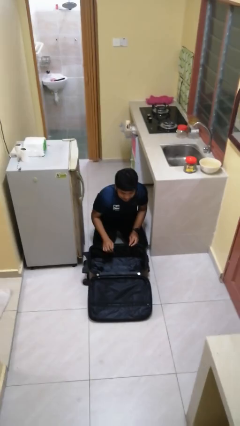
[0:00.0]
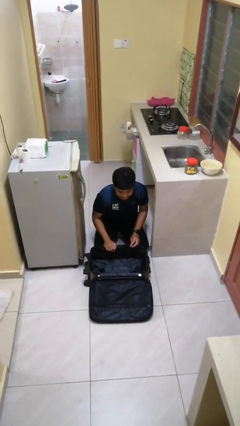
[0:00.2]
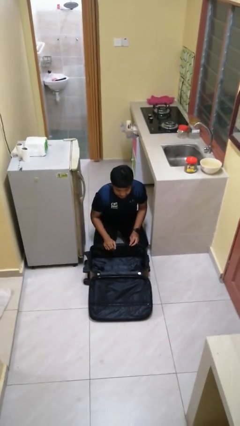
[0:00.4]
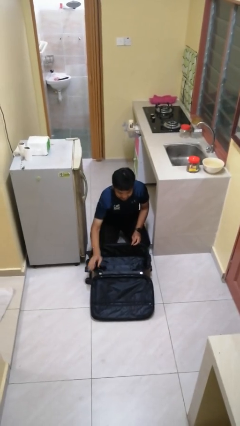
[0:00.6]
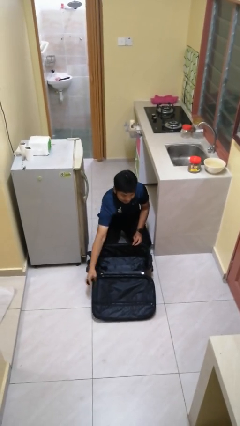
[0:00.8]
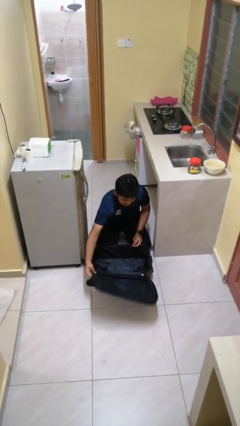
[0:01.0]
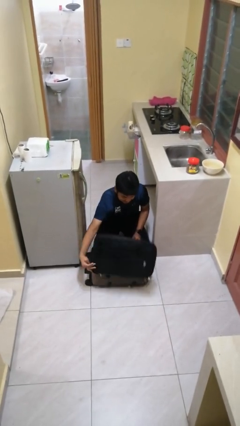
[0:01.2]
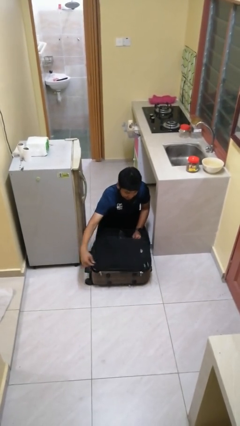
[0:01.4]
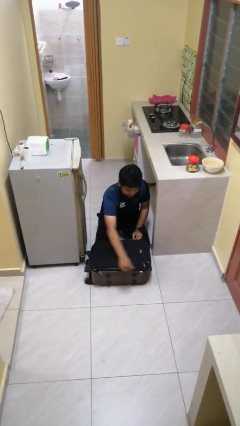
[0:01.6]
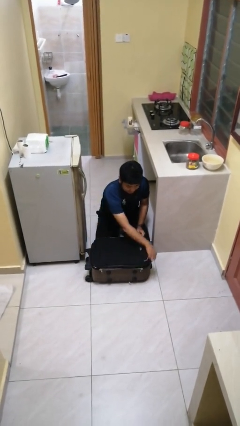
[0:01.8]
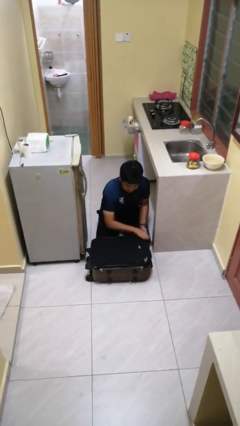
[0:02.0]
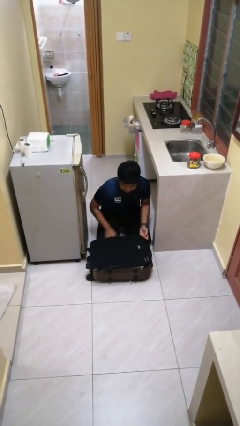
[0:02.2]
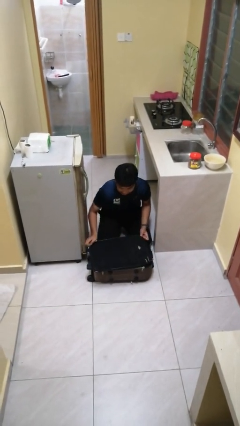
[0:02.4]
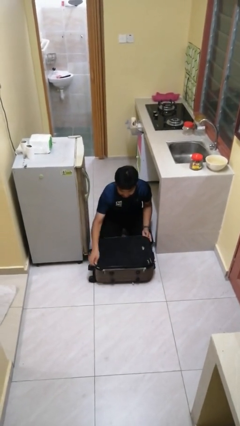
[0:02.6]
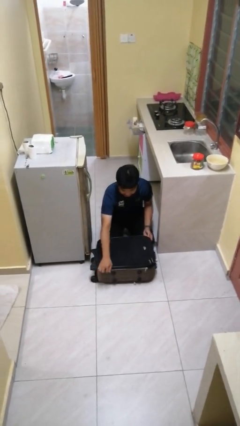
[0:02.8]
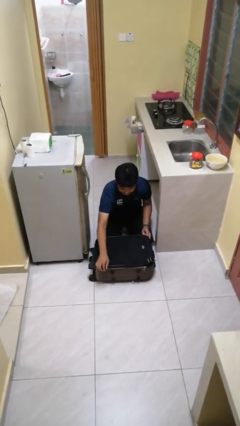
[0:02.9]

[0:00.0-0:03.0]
person closes suitcase

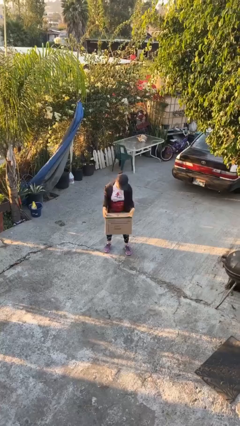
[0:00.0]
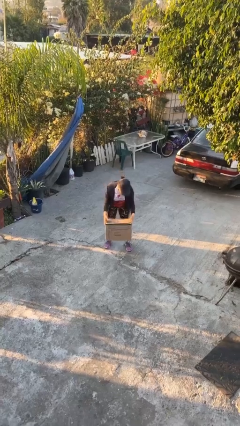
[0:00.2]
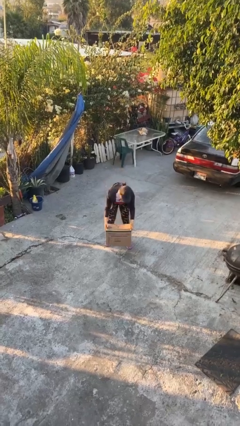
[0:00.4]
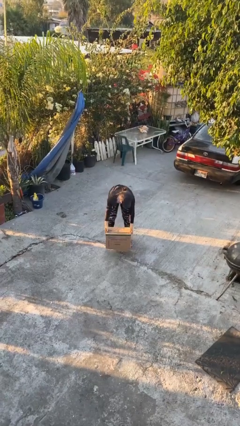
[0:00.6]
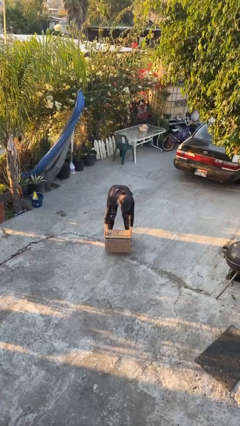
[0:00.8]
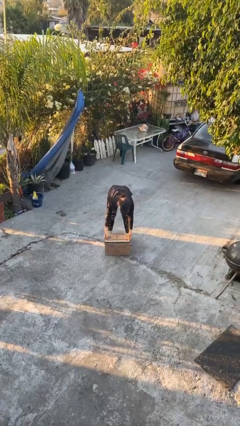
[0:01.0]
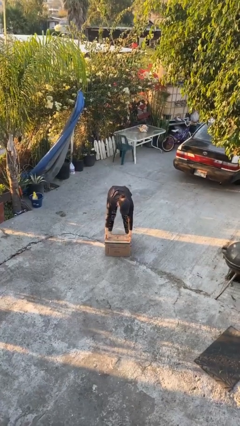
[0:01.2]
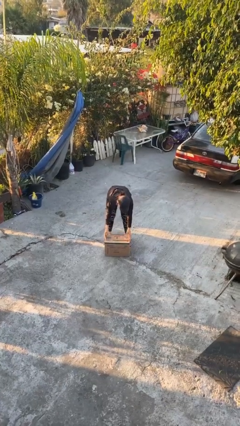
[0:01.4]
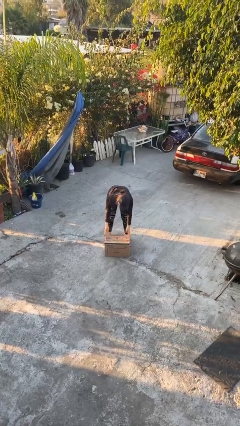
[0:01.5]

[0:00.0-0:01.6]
person puts down object on floor

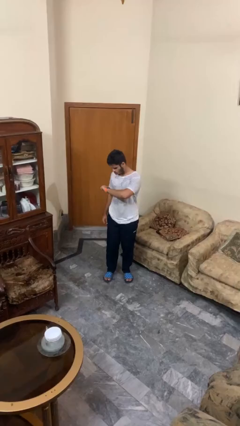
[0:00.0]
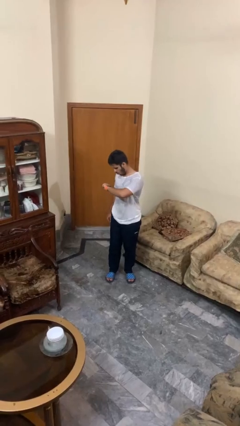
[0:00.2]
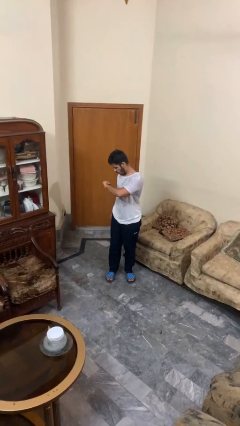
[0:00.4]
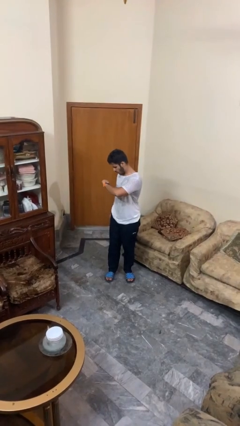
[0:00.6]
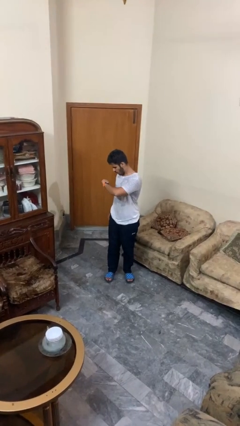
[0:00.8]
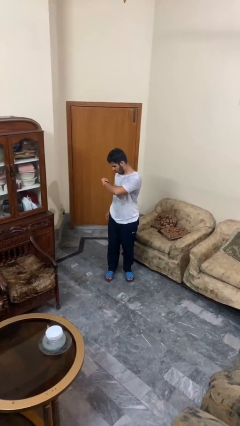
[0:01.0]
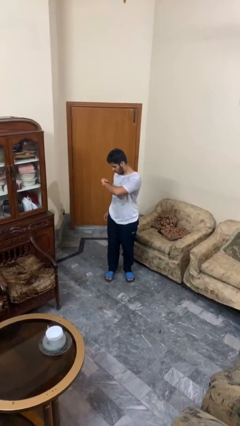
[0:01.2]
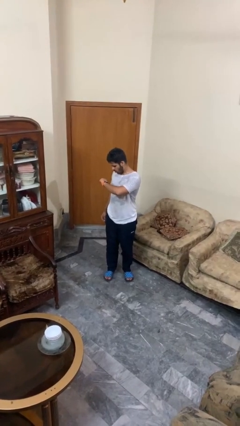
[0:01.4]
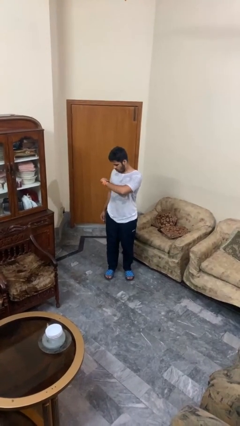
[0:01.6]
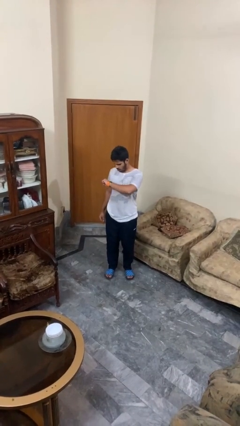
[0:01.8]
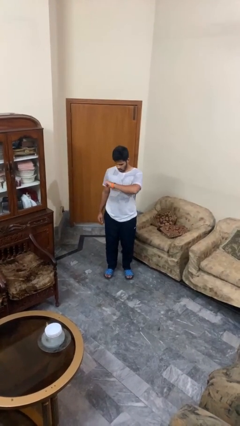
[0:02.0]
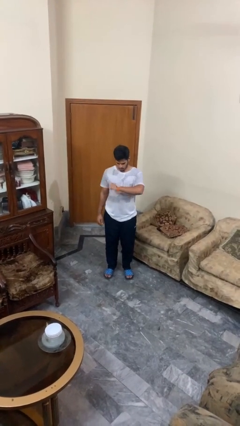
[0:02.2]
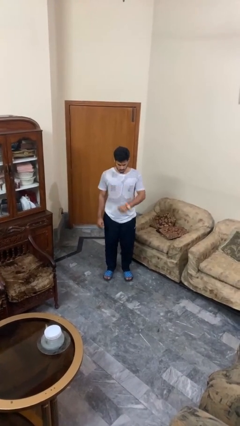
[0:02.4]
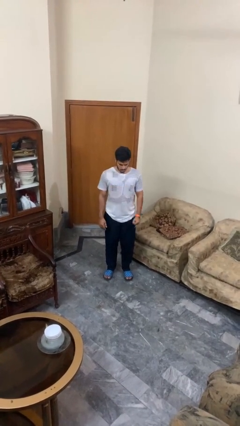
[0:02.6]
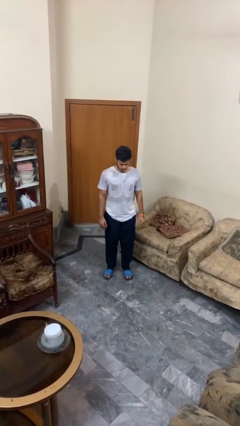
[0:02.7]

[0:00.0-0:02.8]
person looks at wristwatch

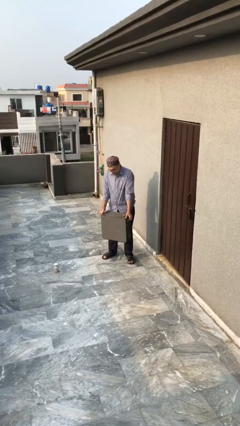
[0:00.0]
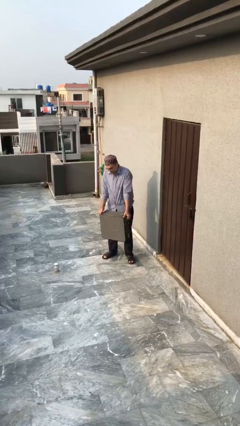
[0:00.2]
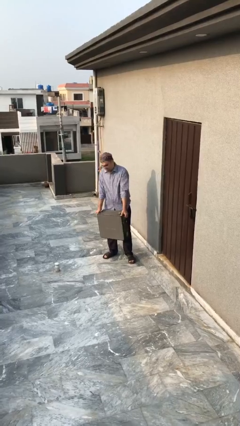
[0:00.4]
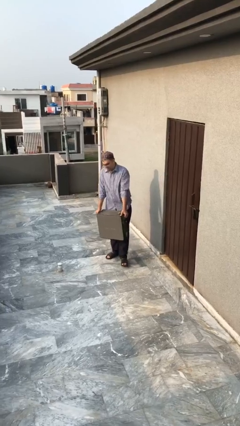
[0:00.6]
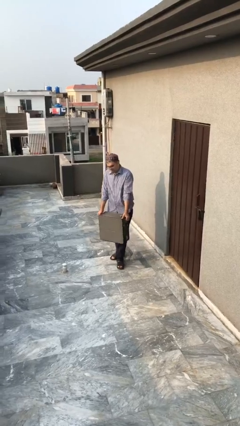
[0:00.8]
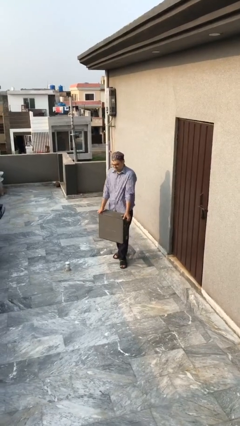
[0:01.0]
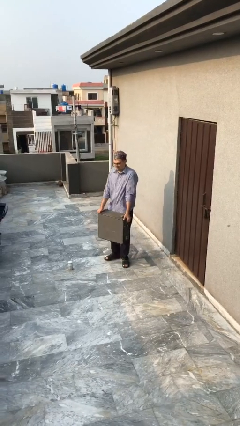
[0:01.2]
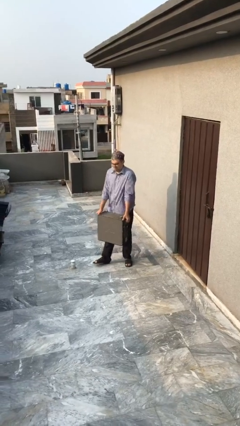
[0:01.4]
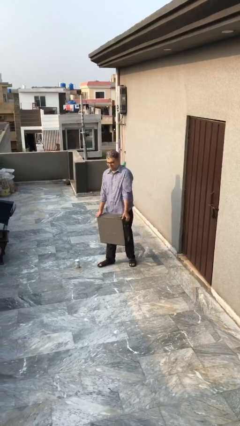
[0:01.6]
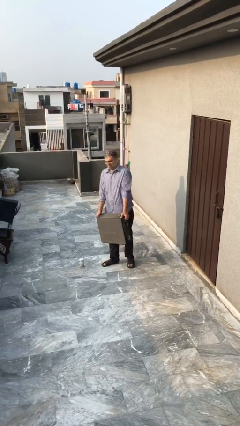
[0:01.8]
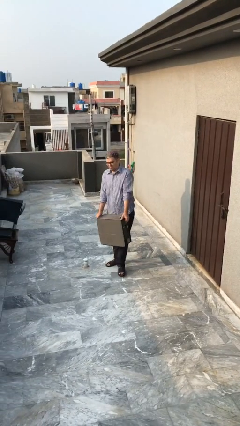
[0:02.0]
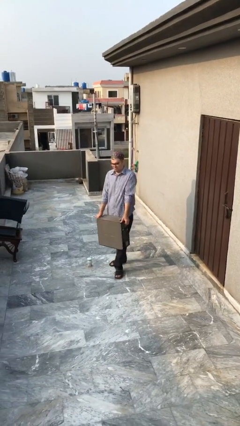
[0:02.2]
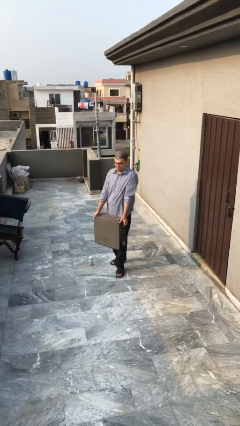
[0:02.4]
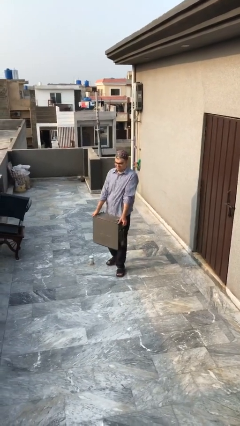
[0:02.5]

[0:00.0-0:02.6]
person carries heavy object

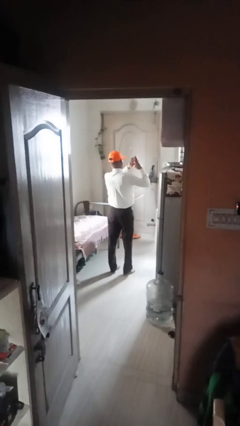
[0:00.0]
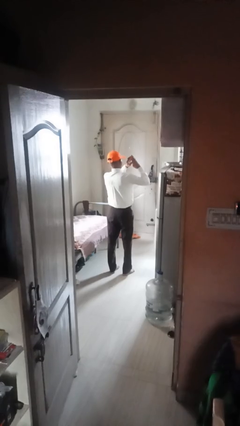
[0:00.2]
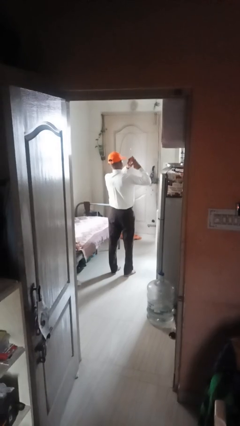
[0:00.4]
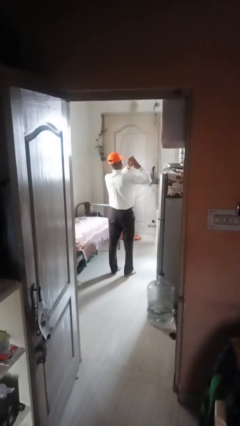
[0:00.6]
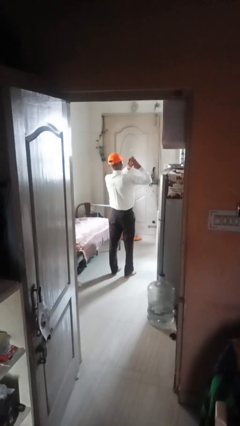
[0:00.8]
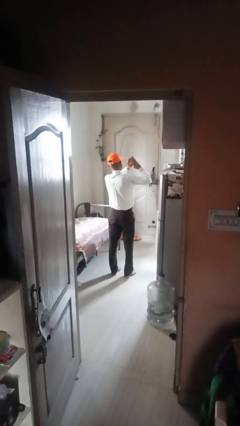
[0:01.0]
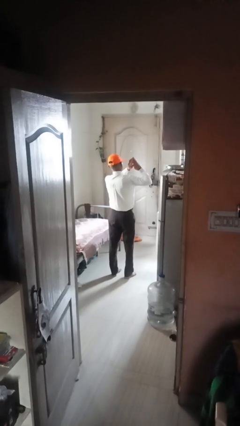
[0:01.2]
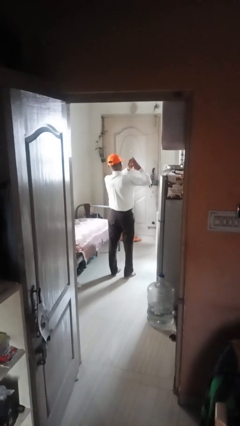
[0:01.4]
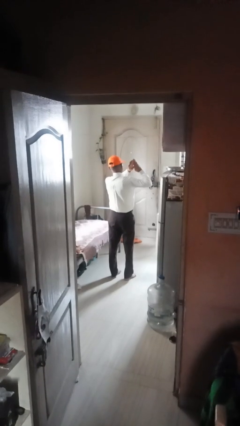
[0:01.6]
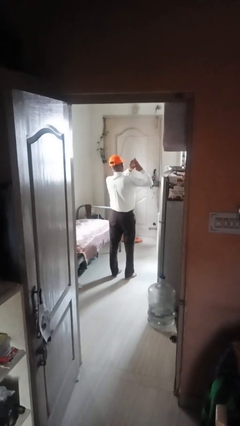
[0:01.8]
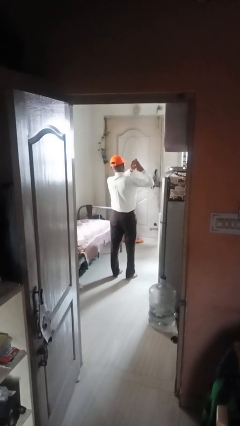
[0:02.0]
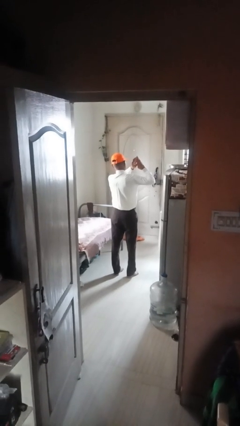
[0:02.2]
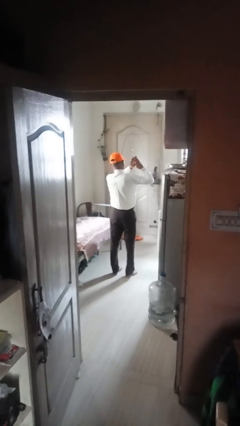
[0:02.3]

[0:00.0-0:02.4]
person gestures heart

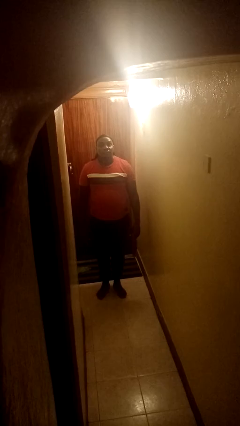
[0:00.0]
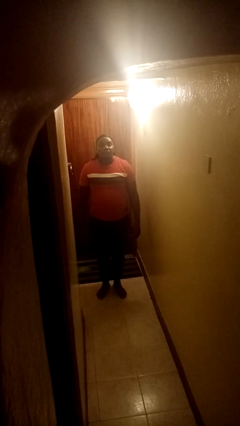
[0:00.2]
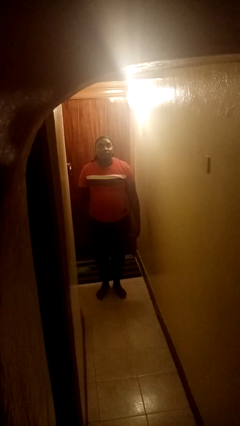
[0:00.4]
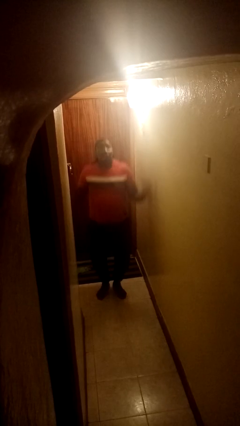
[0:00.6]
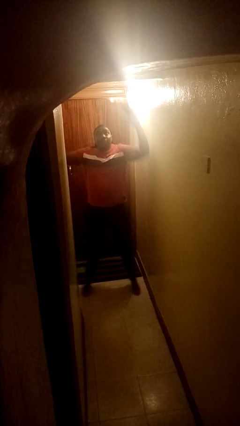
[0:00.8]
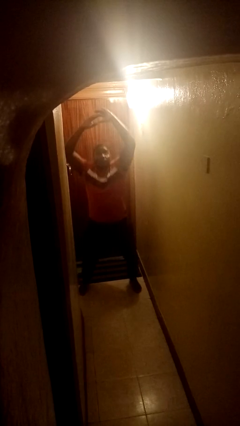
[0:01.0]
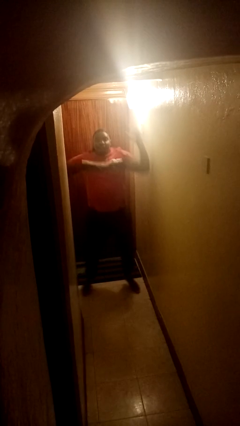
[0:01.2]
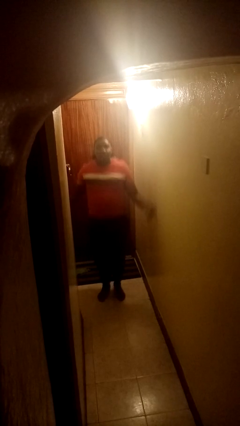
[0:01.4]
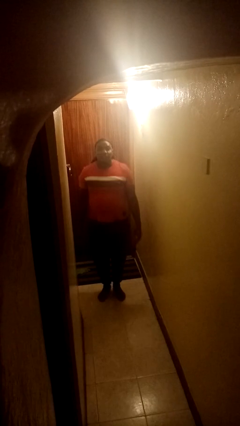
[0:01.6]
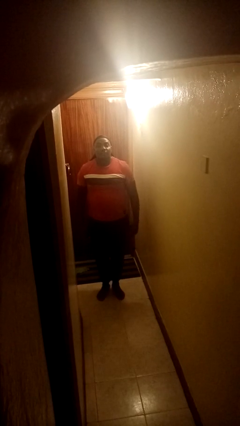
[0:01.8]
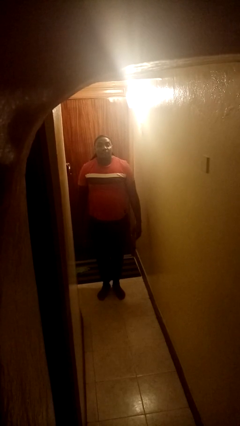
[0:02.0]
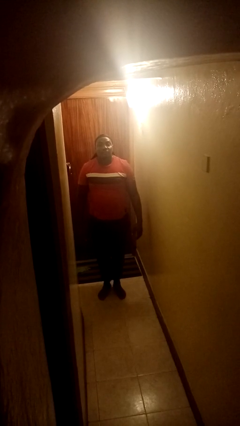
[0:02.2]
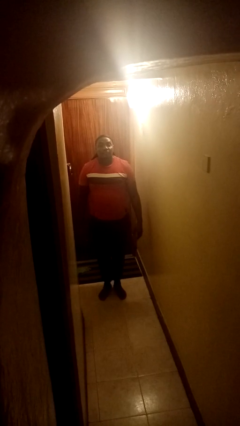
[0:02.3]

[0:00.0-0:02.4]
person exercises with jumping jacks

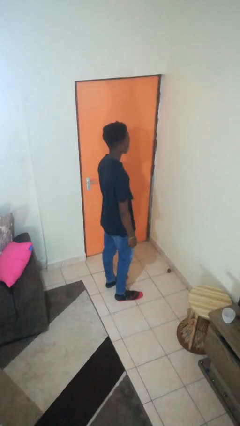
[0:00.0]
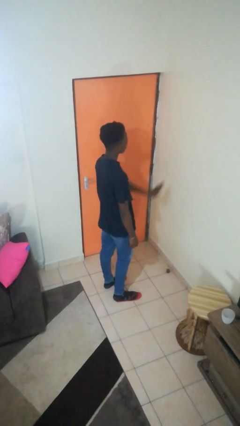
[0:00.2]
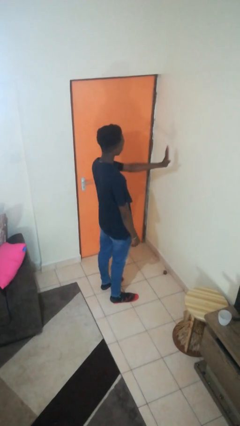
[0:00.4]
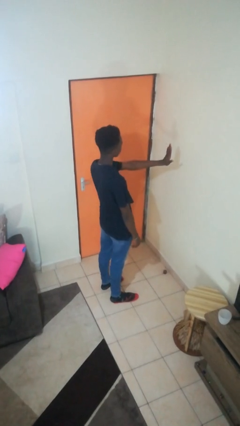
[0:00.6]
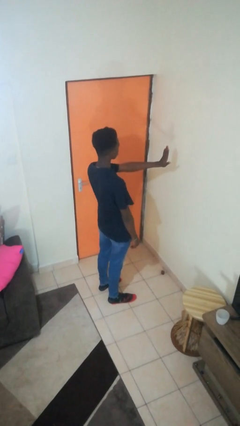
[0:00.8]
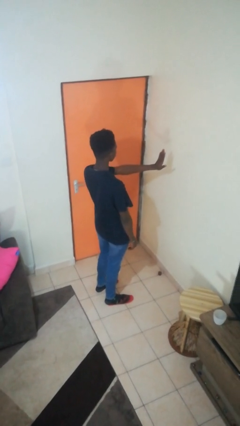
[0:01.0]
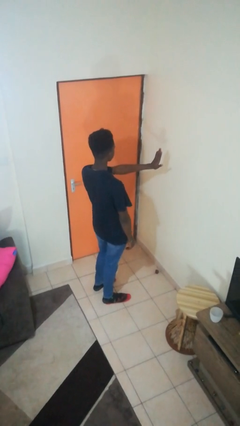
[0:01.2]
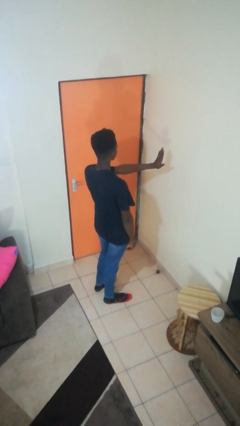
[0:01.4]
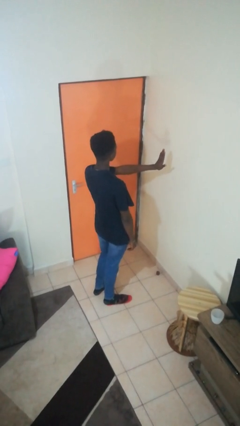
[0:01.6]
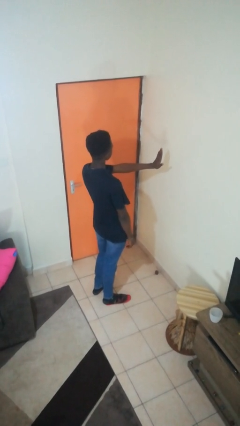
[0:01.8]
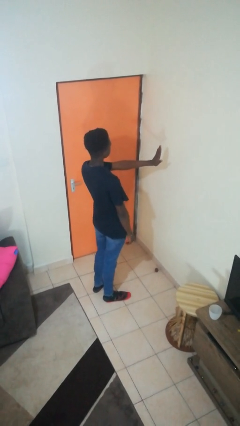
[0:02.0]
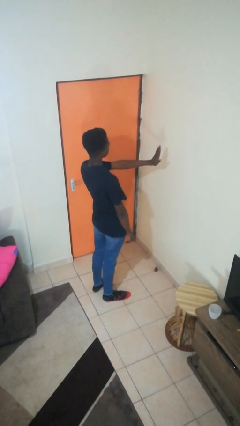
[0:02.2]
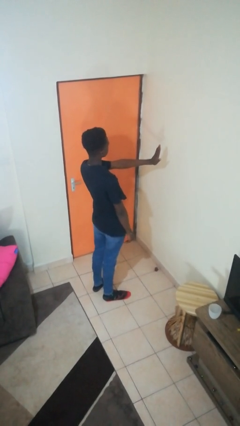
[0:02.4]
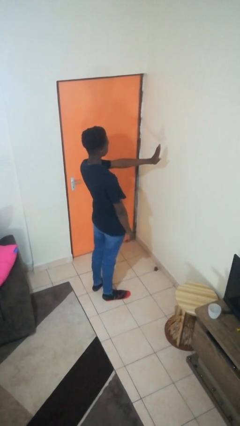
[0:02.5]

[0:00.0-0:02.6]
person gestures stop
